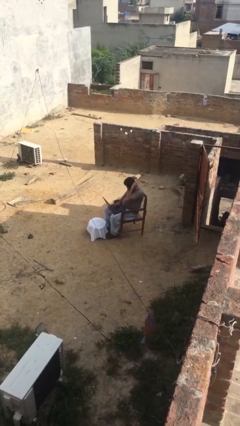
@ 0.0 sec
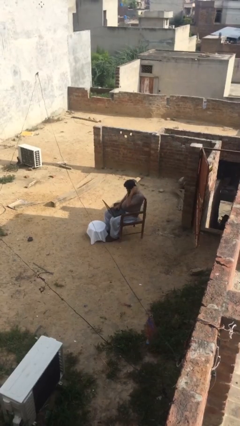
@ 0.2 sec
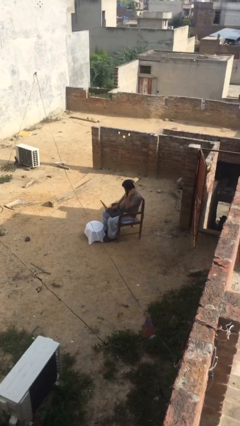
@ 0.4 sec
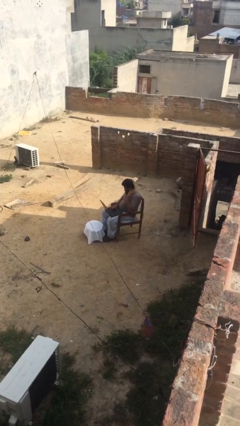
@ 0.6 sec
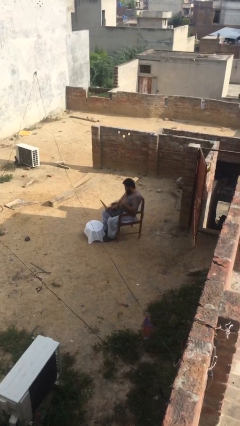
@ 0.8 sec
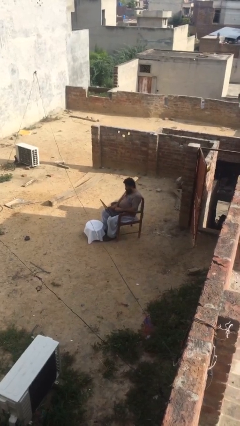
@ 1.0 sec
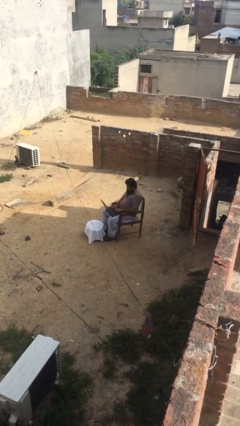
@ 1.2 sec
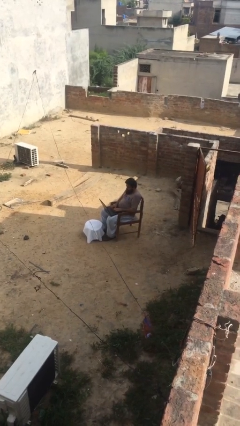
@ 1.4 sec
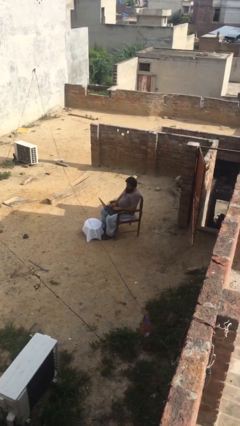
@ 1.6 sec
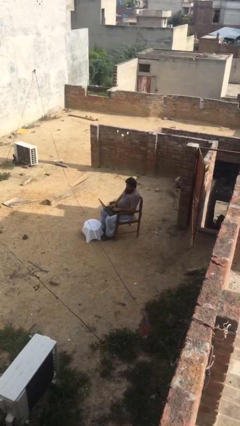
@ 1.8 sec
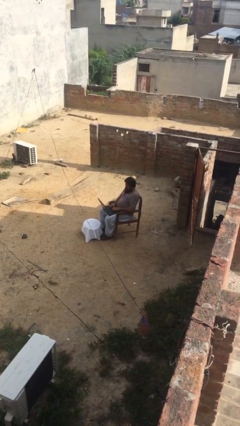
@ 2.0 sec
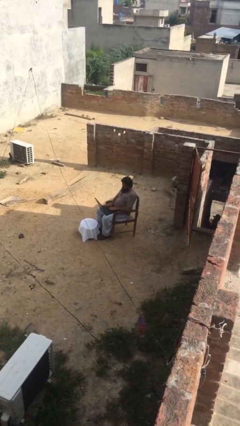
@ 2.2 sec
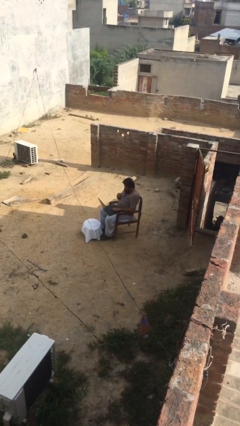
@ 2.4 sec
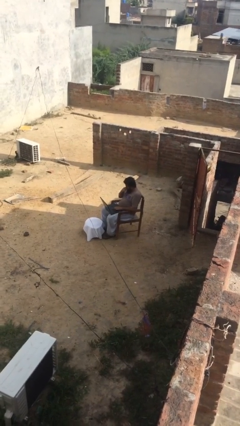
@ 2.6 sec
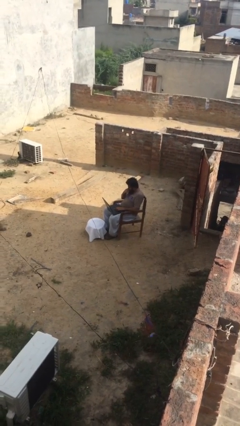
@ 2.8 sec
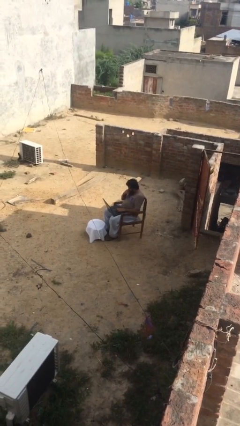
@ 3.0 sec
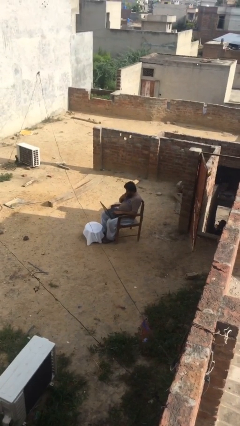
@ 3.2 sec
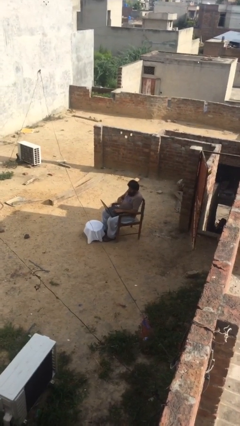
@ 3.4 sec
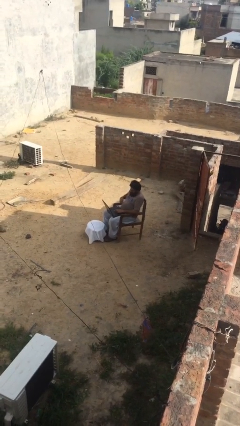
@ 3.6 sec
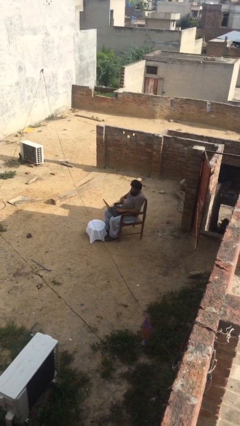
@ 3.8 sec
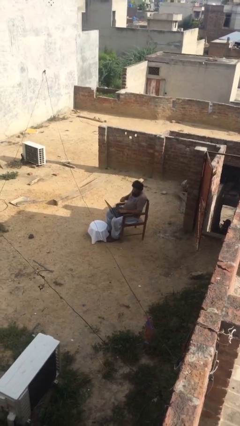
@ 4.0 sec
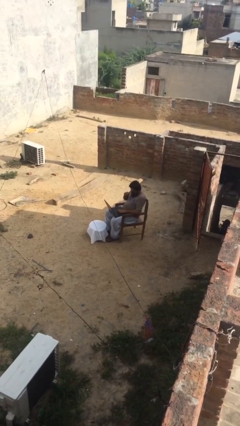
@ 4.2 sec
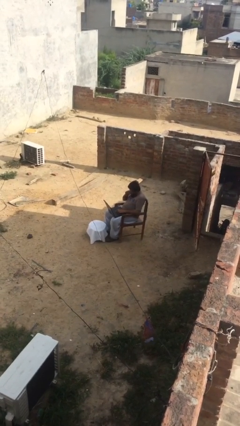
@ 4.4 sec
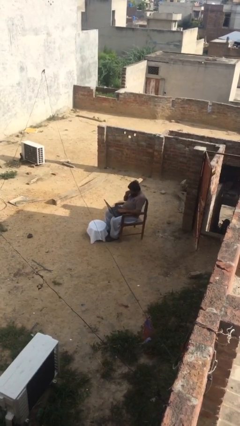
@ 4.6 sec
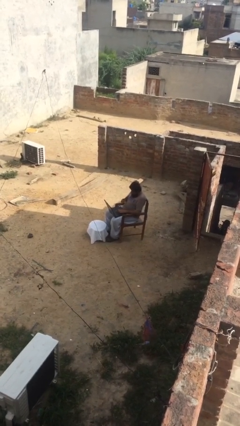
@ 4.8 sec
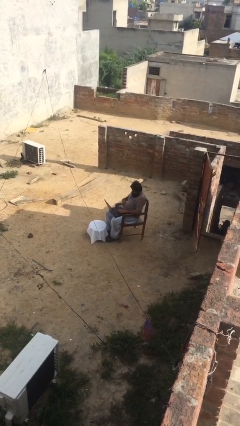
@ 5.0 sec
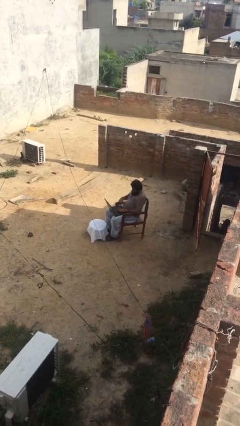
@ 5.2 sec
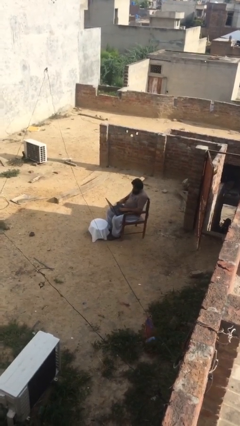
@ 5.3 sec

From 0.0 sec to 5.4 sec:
person interacts with laptop

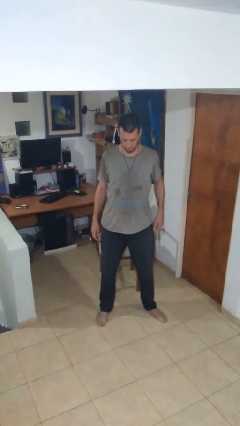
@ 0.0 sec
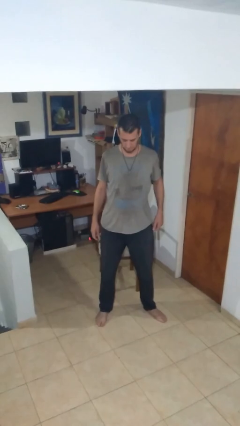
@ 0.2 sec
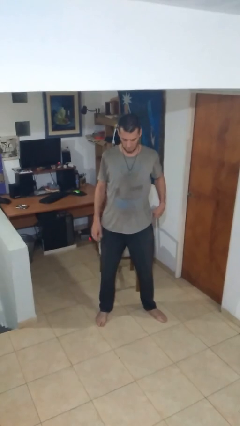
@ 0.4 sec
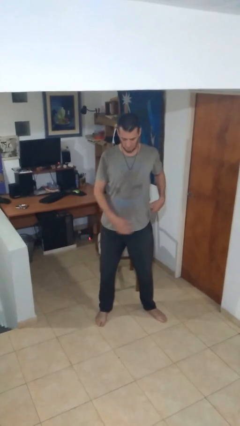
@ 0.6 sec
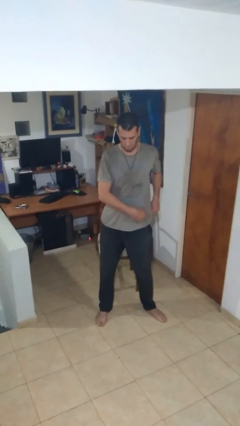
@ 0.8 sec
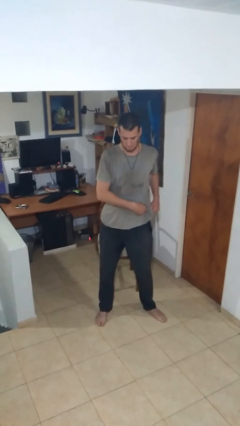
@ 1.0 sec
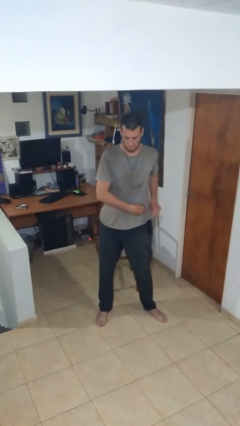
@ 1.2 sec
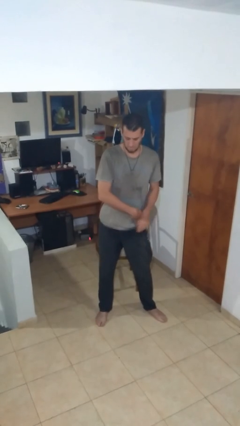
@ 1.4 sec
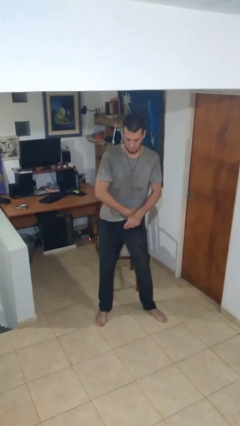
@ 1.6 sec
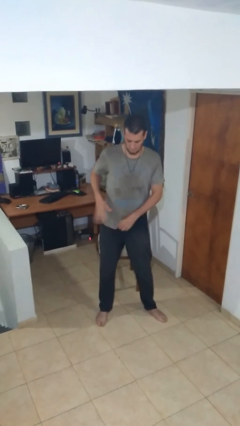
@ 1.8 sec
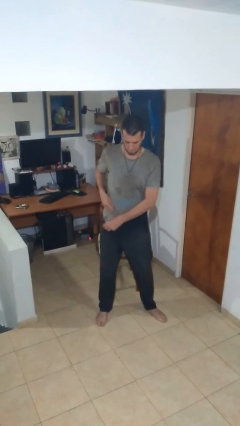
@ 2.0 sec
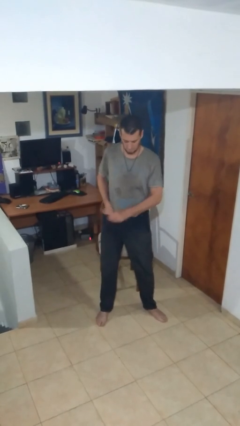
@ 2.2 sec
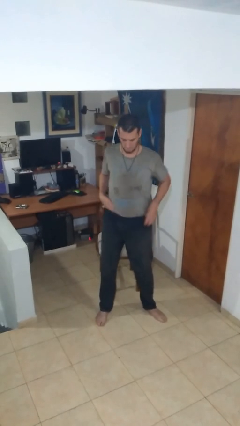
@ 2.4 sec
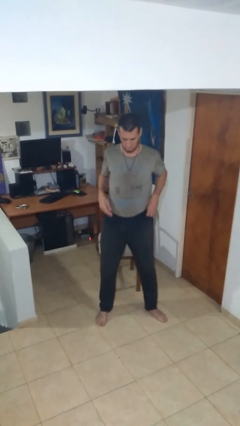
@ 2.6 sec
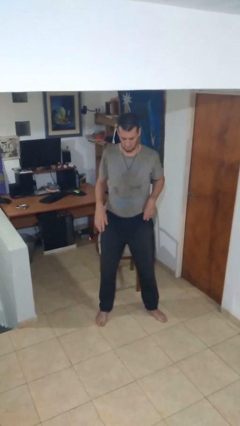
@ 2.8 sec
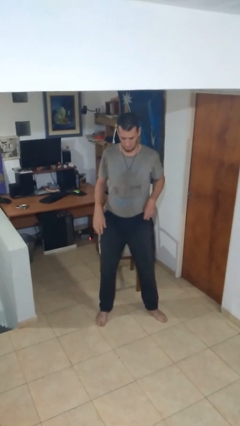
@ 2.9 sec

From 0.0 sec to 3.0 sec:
person tucks in shirt

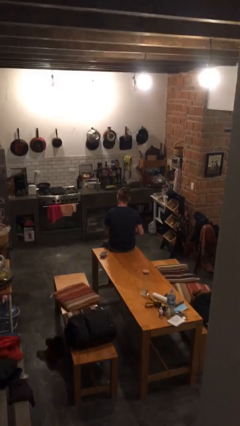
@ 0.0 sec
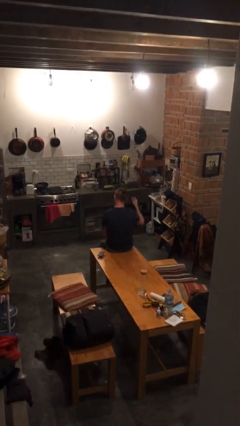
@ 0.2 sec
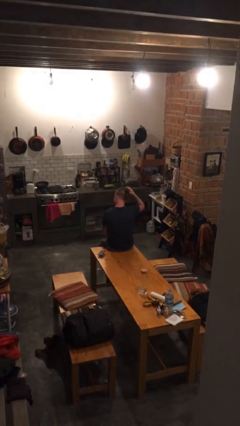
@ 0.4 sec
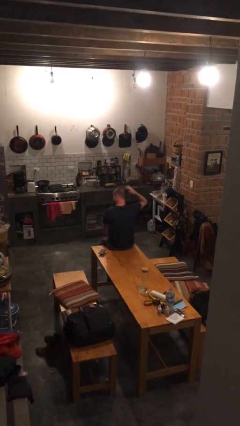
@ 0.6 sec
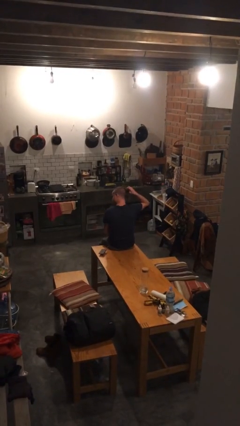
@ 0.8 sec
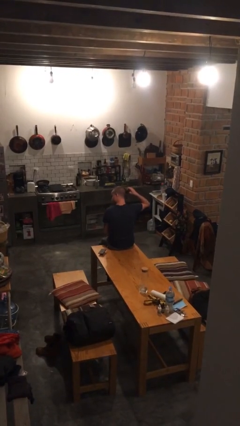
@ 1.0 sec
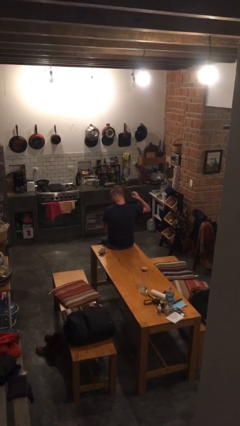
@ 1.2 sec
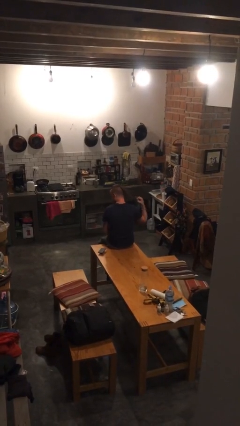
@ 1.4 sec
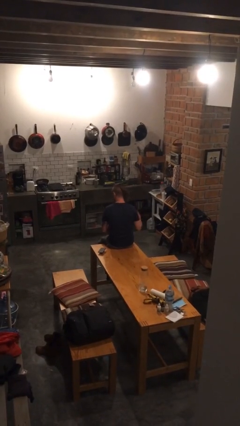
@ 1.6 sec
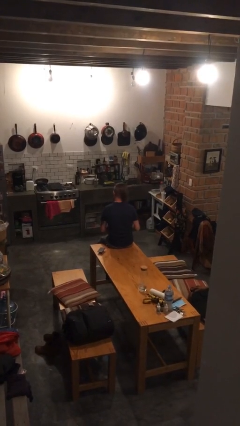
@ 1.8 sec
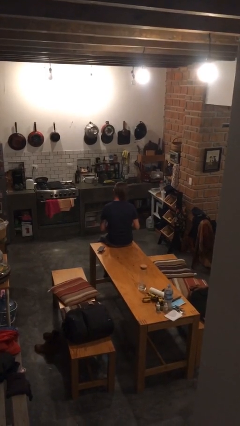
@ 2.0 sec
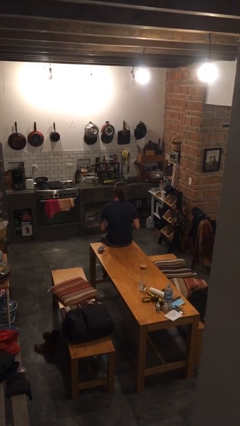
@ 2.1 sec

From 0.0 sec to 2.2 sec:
person takes off hairtie

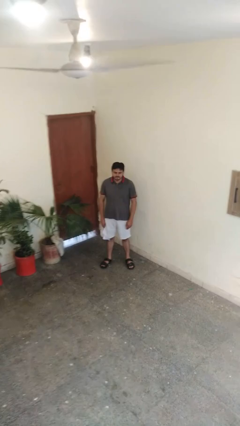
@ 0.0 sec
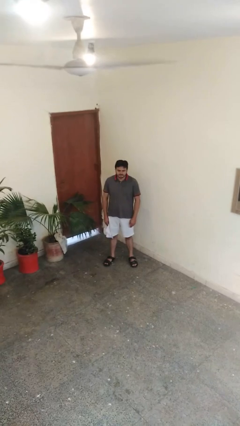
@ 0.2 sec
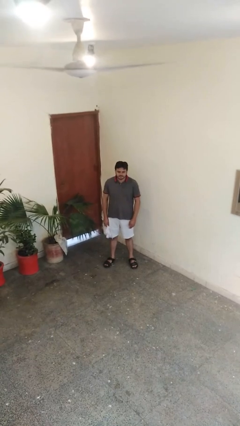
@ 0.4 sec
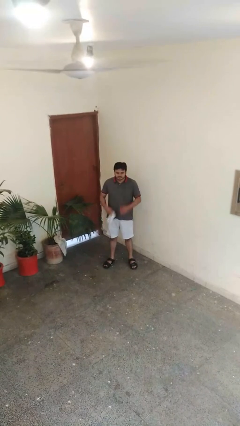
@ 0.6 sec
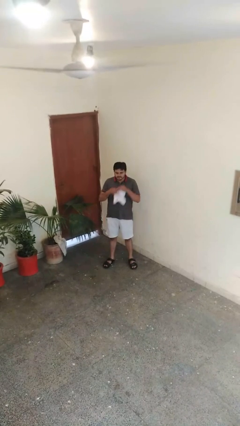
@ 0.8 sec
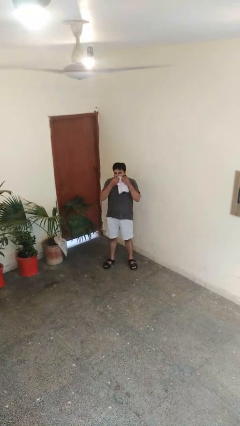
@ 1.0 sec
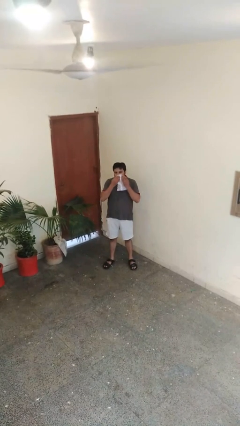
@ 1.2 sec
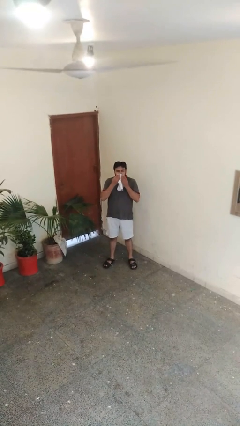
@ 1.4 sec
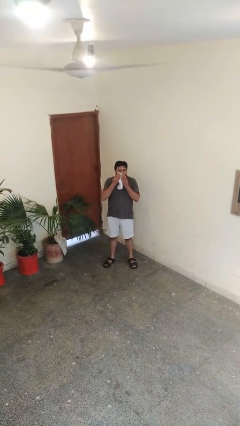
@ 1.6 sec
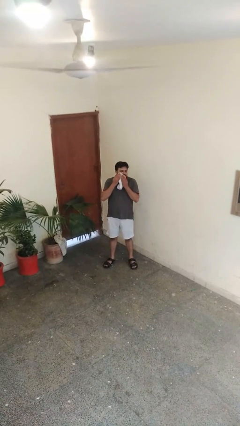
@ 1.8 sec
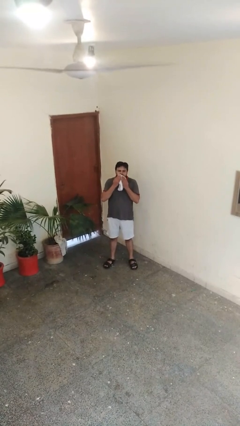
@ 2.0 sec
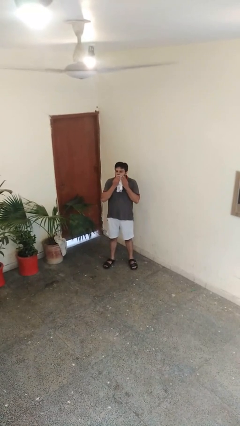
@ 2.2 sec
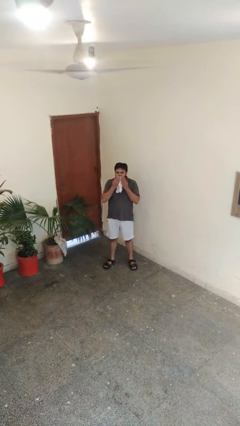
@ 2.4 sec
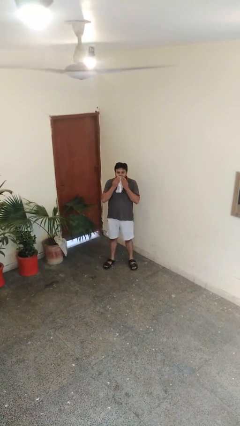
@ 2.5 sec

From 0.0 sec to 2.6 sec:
person wipes mouth with napkin

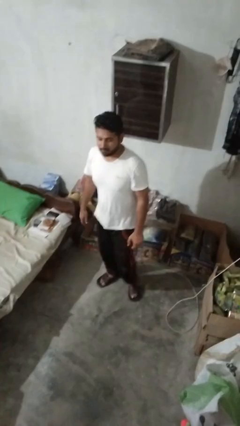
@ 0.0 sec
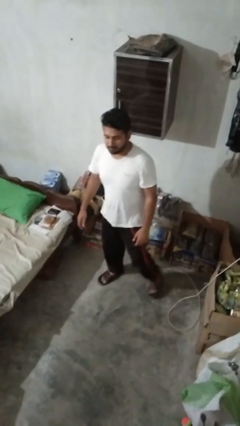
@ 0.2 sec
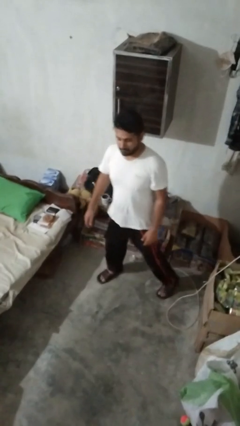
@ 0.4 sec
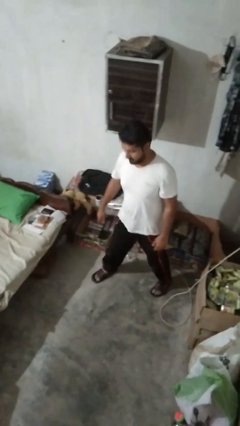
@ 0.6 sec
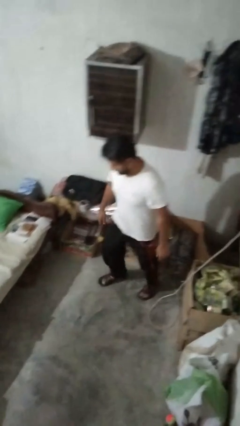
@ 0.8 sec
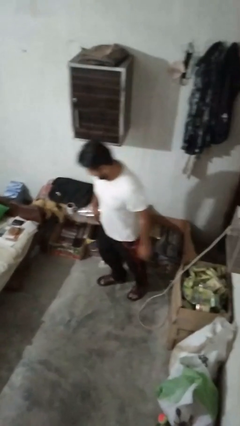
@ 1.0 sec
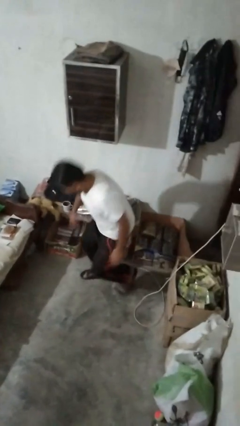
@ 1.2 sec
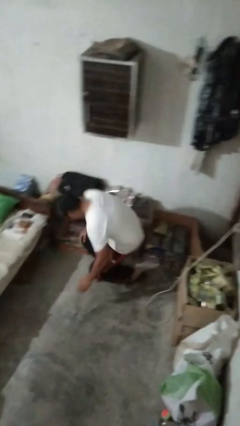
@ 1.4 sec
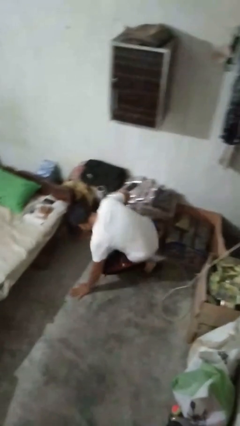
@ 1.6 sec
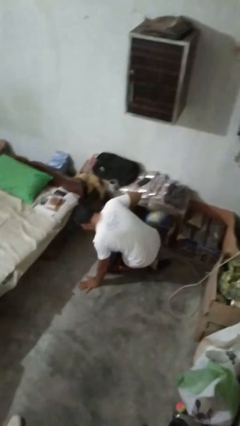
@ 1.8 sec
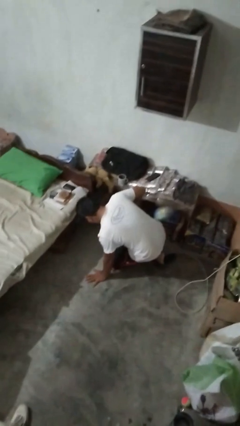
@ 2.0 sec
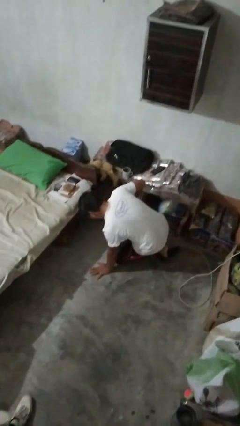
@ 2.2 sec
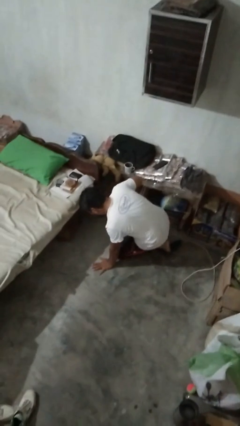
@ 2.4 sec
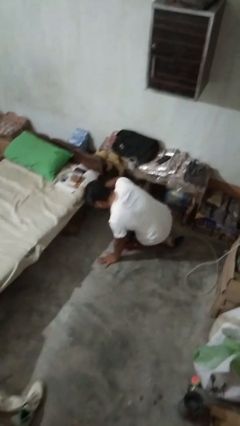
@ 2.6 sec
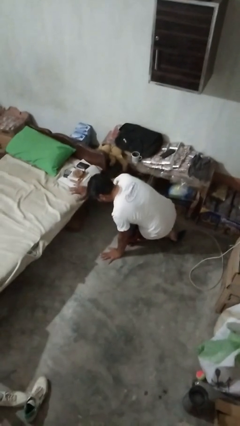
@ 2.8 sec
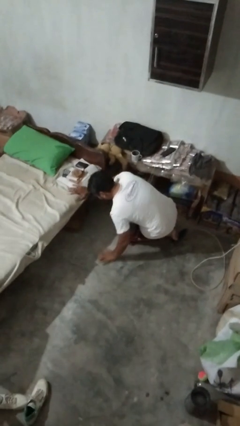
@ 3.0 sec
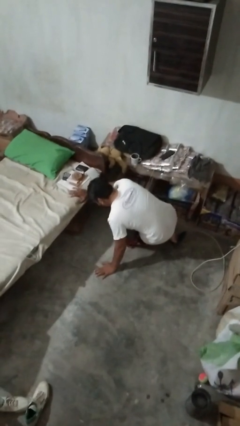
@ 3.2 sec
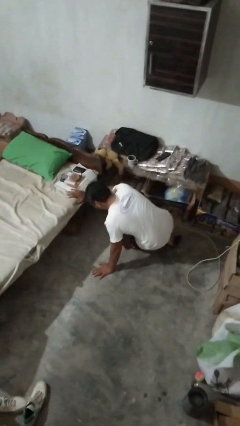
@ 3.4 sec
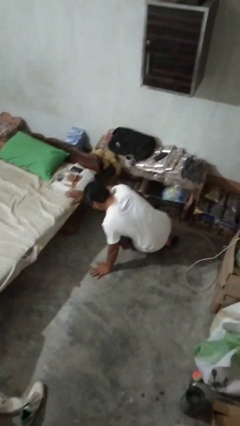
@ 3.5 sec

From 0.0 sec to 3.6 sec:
person trips on object on floor

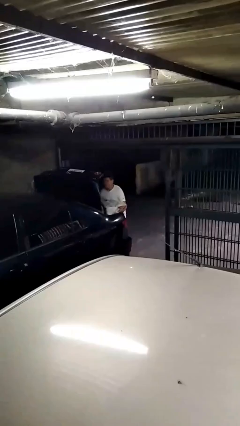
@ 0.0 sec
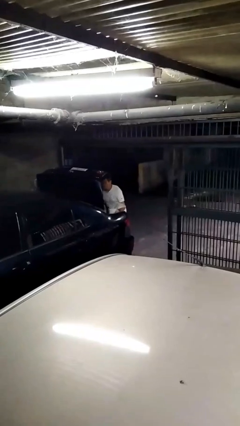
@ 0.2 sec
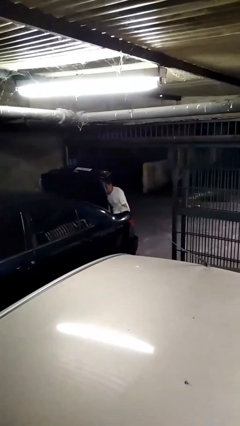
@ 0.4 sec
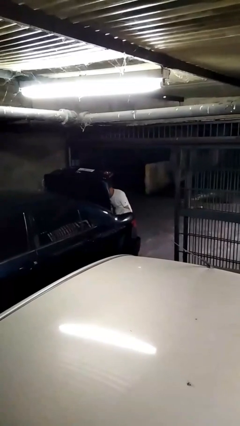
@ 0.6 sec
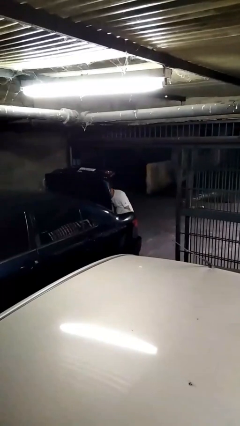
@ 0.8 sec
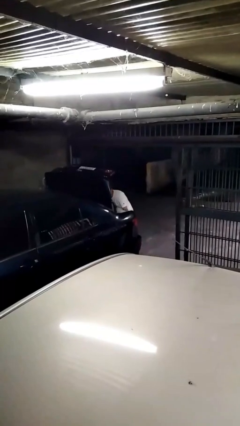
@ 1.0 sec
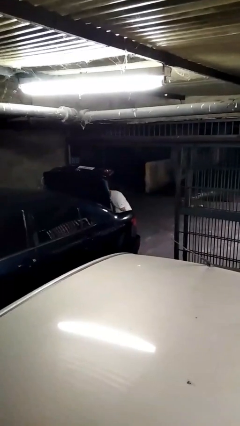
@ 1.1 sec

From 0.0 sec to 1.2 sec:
person loads car
